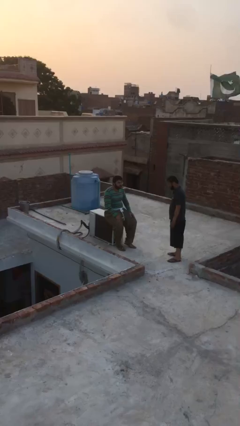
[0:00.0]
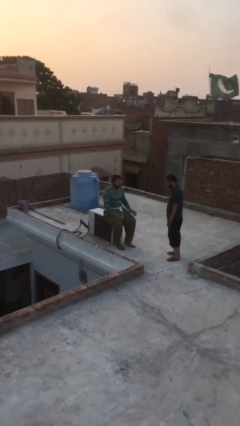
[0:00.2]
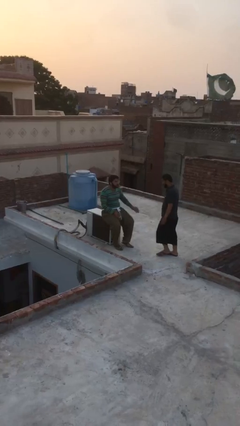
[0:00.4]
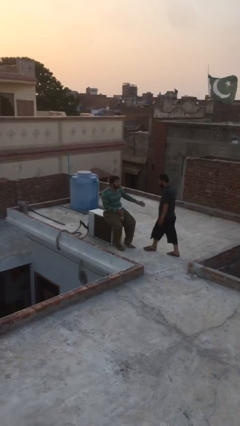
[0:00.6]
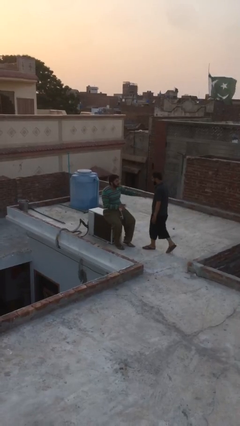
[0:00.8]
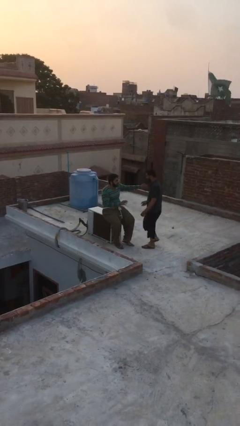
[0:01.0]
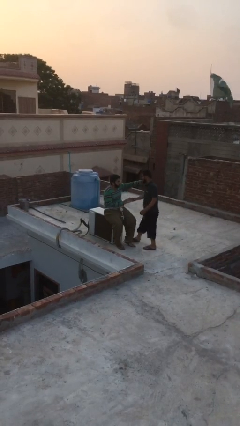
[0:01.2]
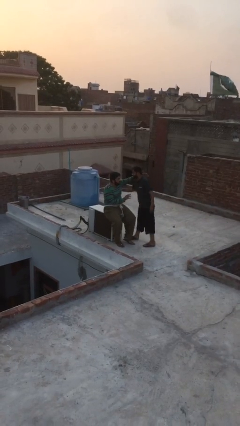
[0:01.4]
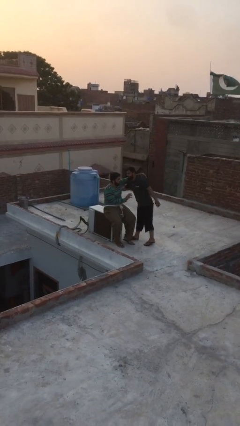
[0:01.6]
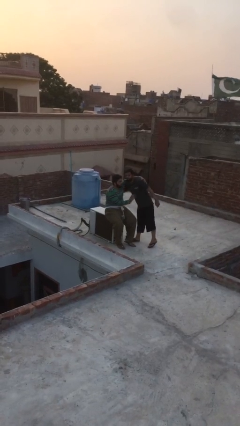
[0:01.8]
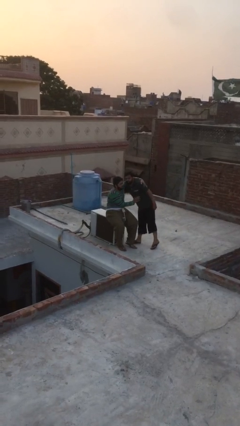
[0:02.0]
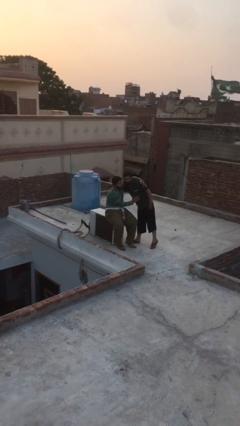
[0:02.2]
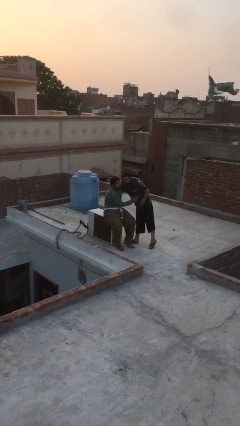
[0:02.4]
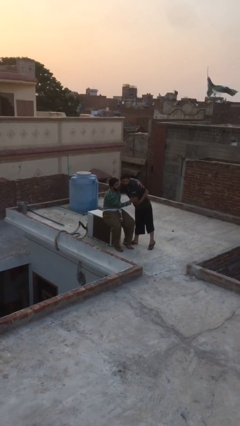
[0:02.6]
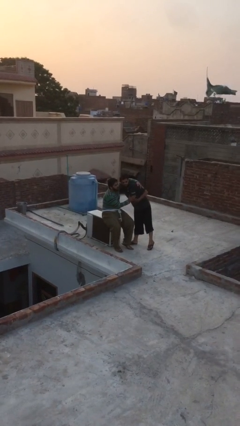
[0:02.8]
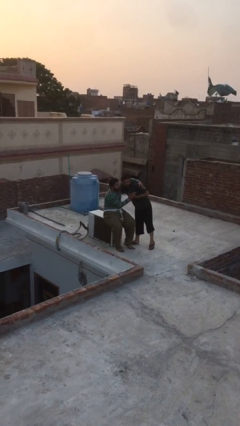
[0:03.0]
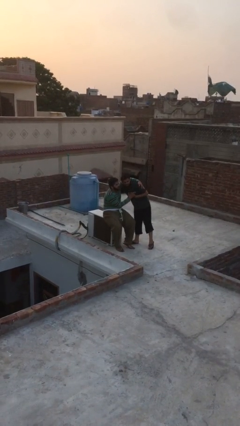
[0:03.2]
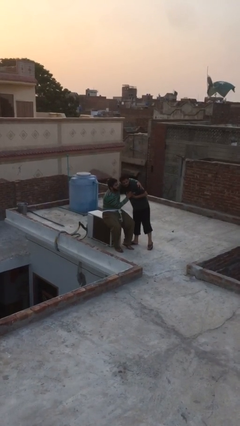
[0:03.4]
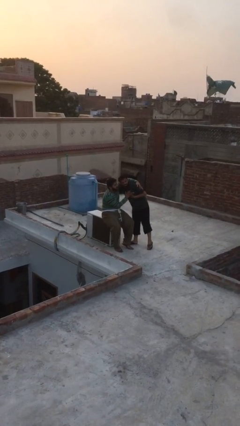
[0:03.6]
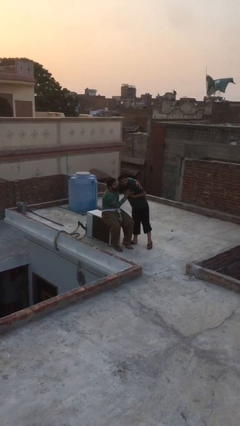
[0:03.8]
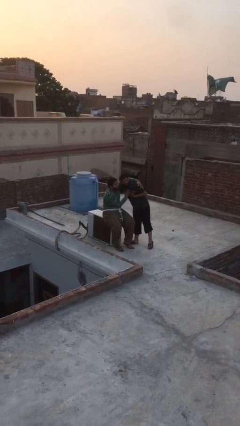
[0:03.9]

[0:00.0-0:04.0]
person embraces person

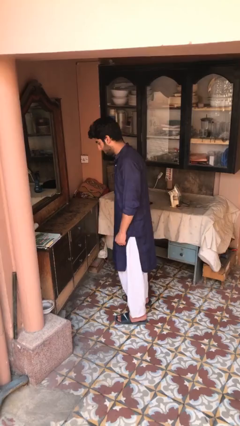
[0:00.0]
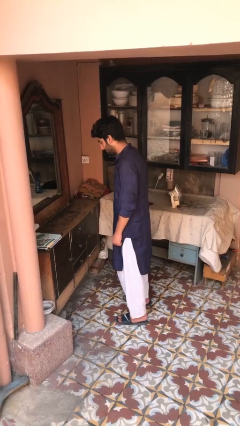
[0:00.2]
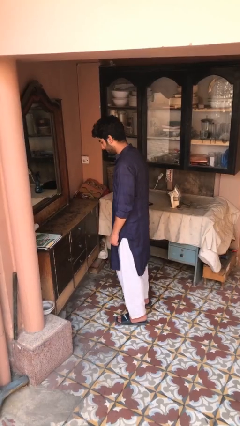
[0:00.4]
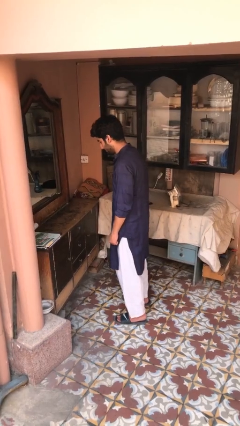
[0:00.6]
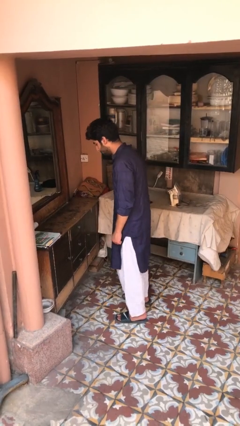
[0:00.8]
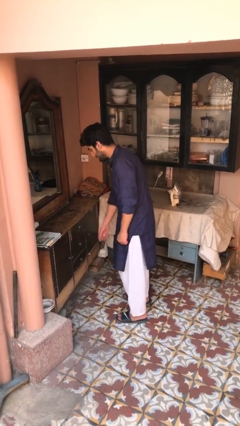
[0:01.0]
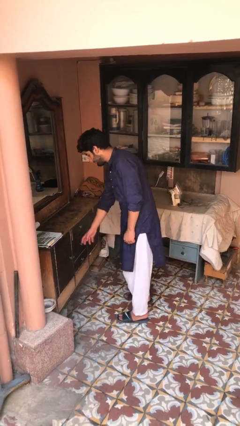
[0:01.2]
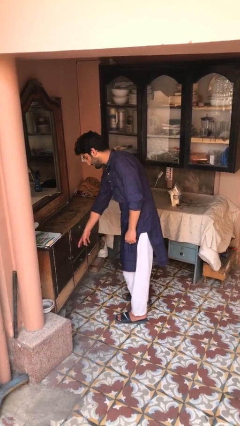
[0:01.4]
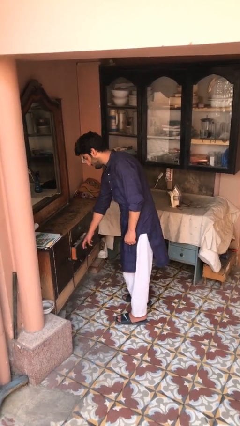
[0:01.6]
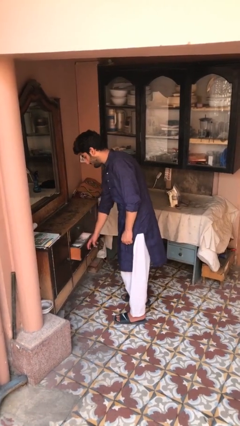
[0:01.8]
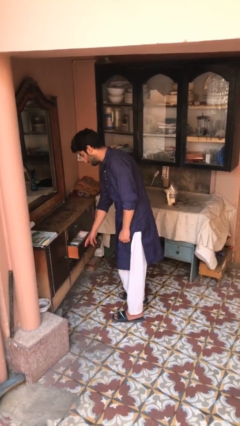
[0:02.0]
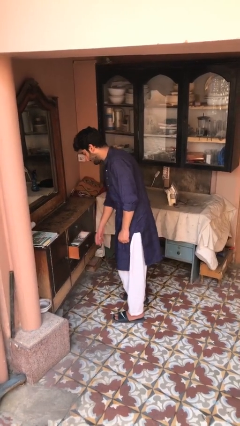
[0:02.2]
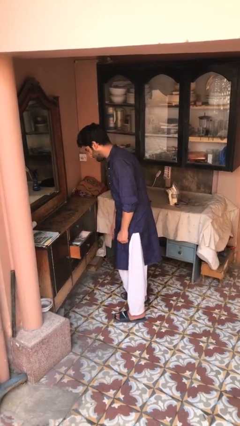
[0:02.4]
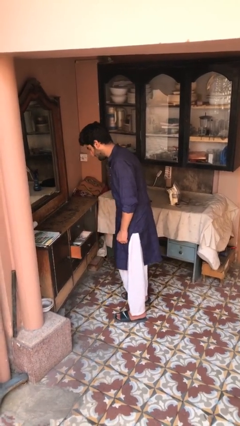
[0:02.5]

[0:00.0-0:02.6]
person opens dresser drawer

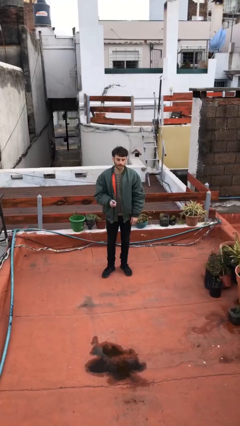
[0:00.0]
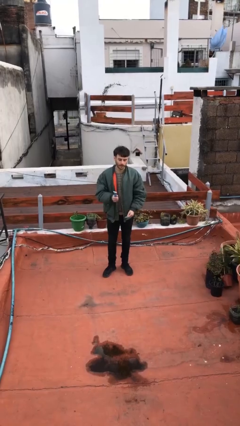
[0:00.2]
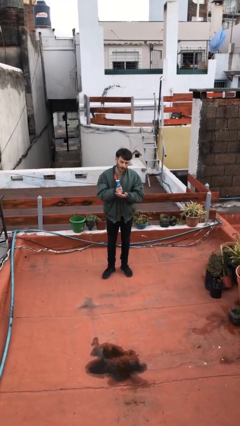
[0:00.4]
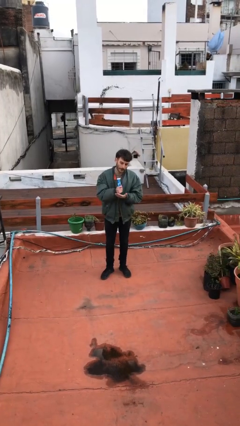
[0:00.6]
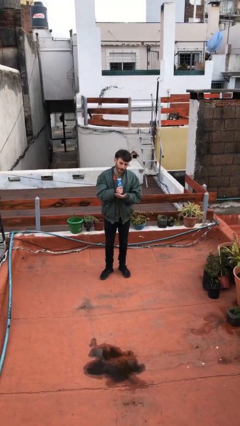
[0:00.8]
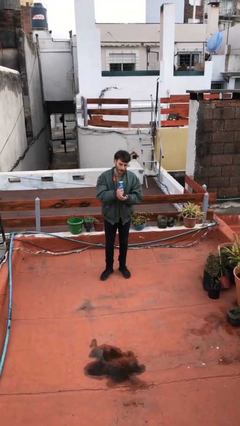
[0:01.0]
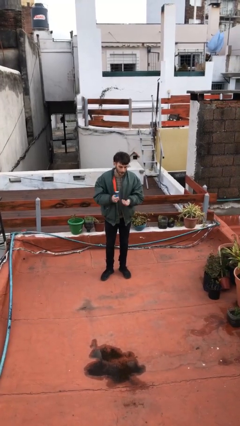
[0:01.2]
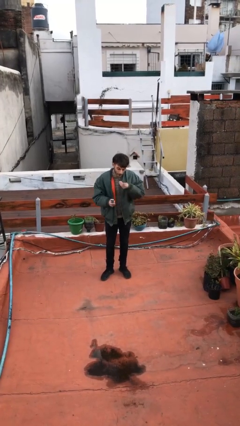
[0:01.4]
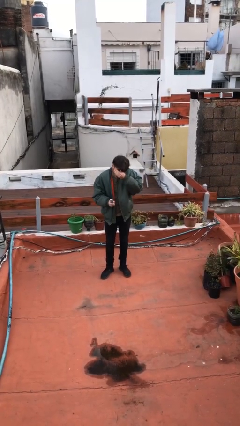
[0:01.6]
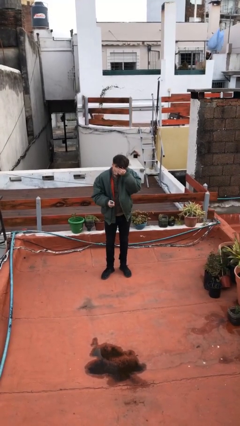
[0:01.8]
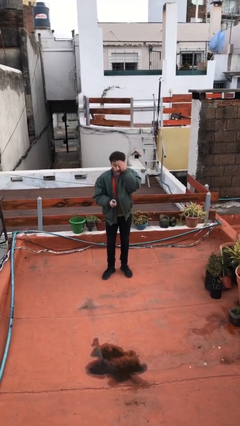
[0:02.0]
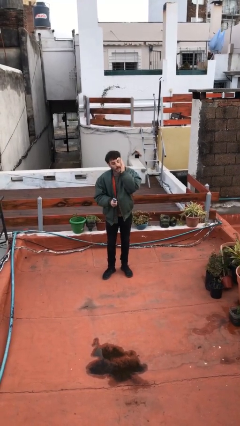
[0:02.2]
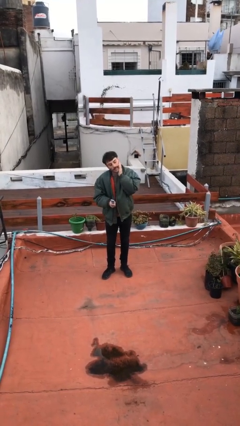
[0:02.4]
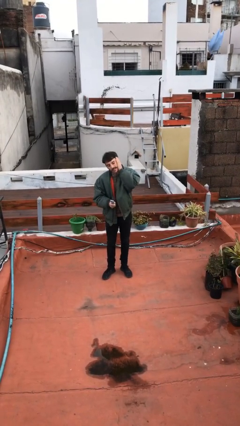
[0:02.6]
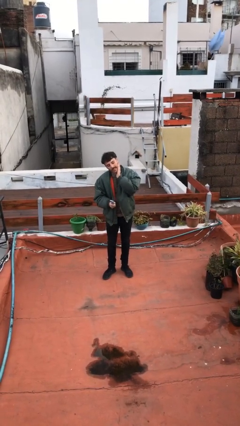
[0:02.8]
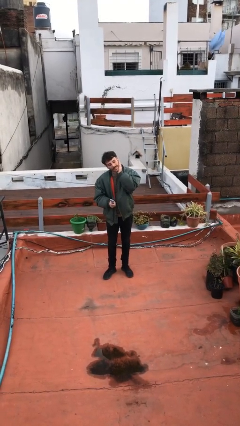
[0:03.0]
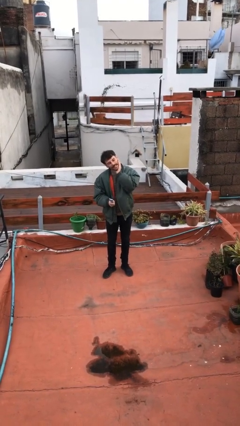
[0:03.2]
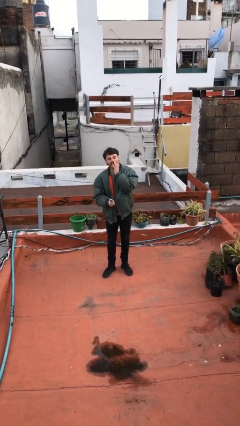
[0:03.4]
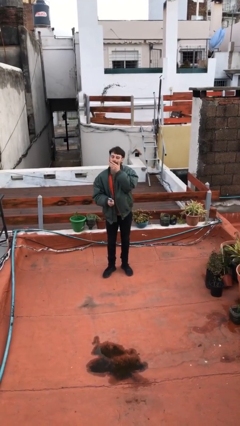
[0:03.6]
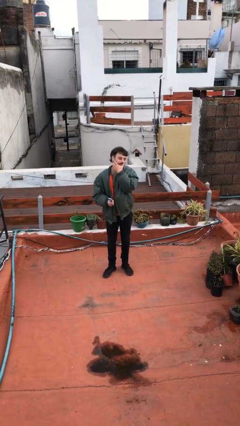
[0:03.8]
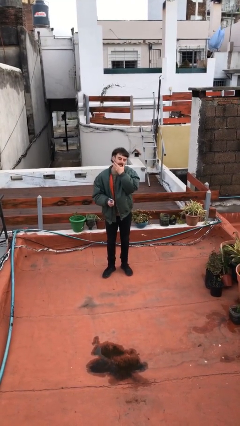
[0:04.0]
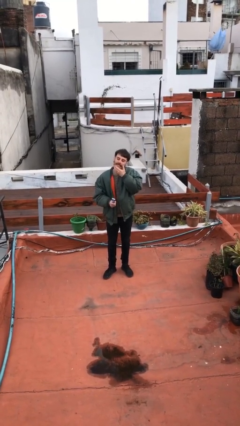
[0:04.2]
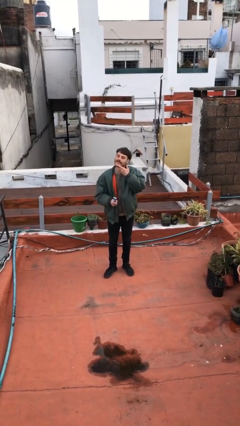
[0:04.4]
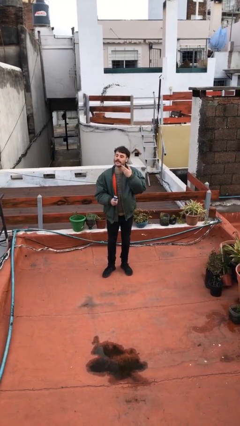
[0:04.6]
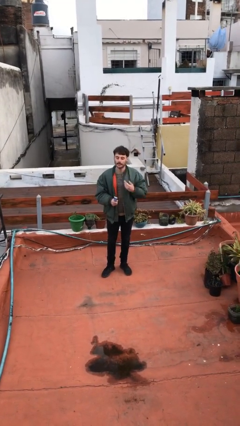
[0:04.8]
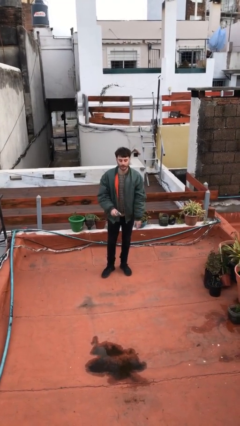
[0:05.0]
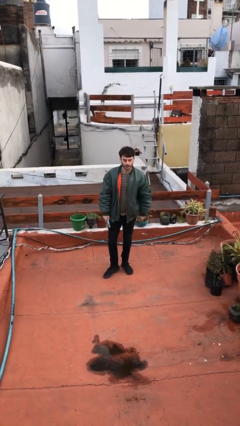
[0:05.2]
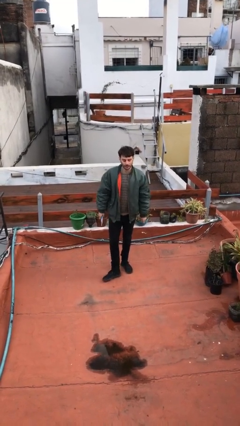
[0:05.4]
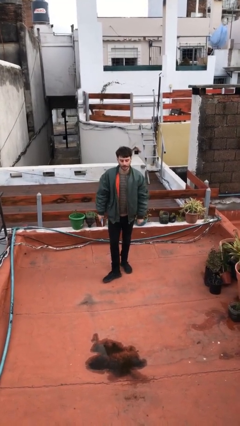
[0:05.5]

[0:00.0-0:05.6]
person applies facial moisturizer

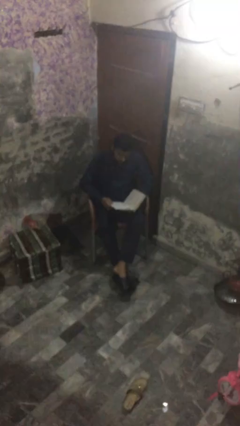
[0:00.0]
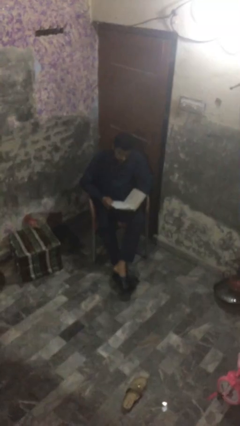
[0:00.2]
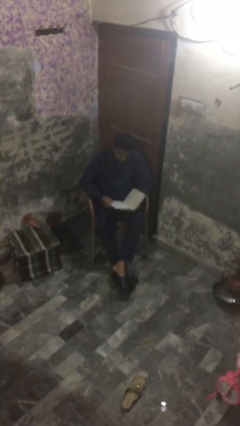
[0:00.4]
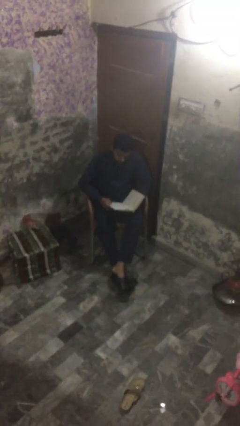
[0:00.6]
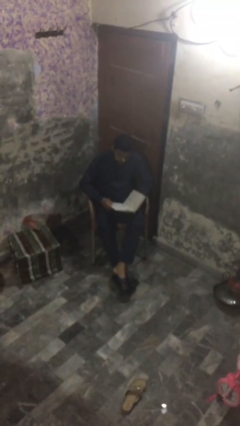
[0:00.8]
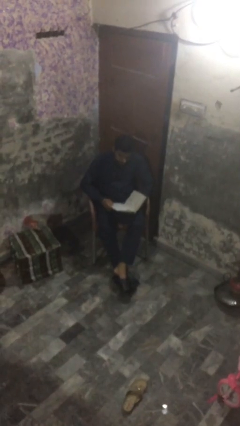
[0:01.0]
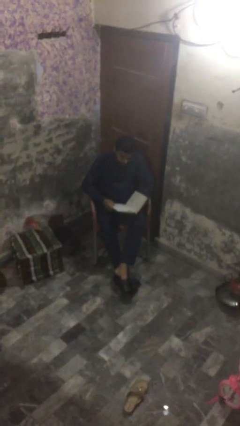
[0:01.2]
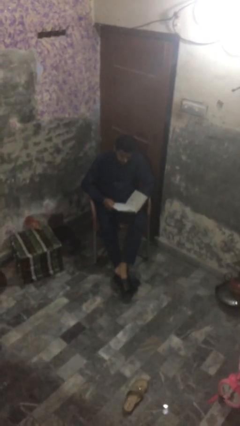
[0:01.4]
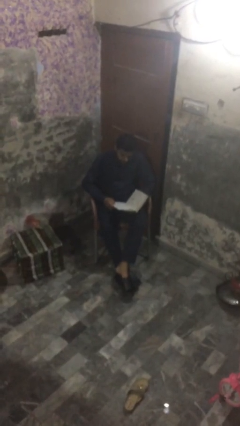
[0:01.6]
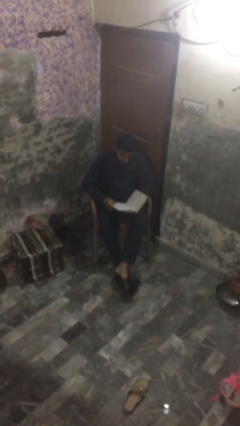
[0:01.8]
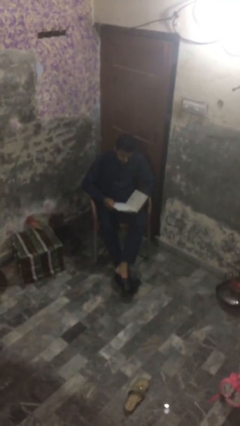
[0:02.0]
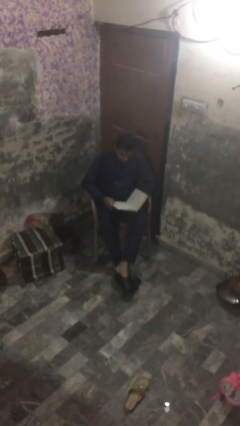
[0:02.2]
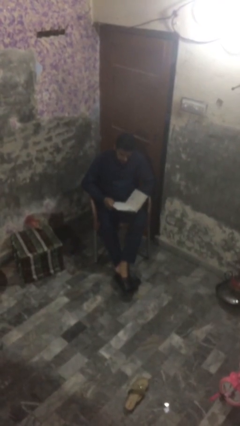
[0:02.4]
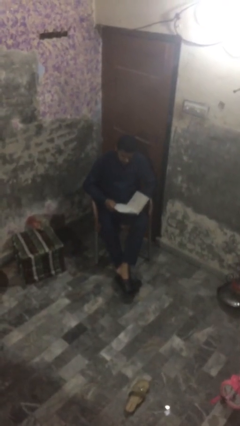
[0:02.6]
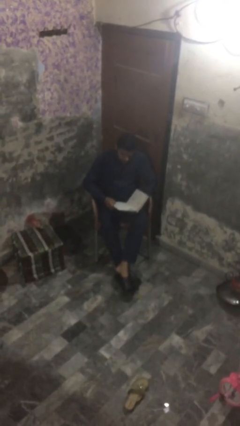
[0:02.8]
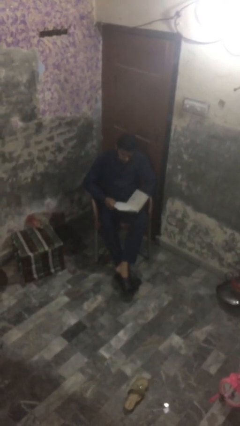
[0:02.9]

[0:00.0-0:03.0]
person sits down

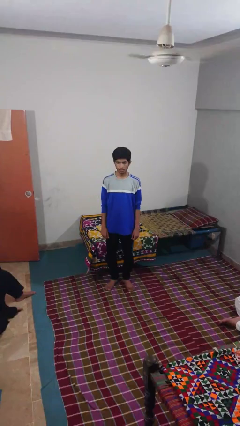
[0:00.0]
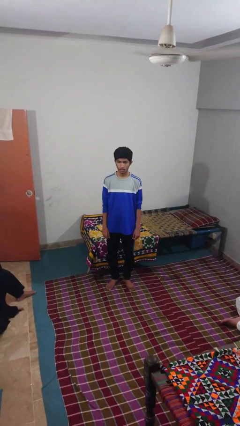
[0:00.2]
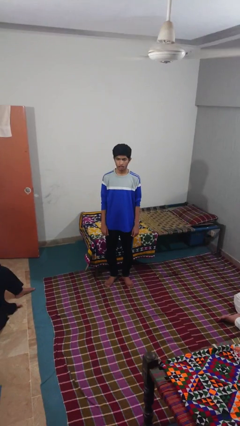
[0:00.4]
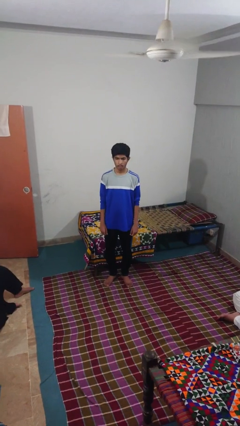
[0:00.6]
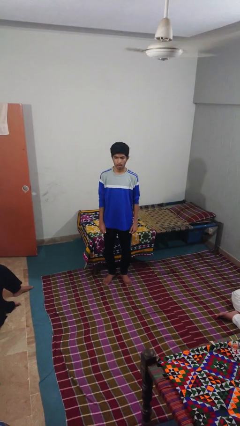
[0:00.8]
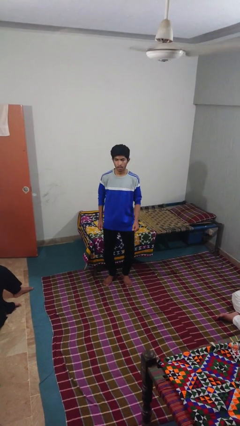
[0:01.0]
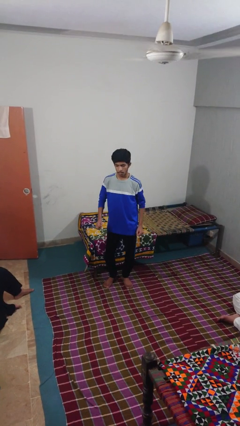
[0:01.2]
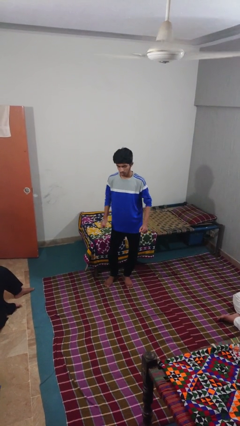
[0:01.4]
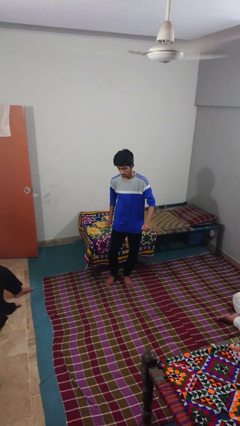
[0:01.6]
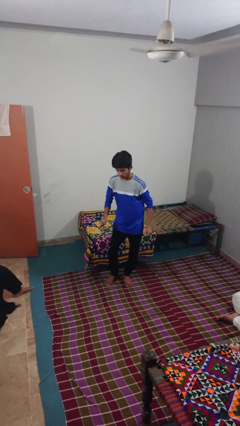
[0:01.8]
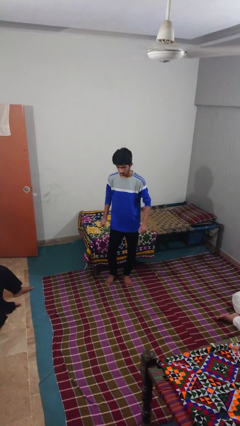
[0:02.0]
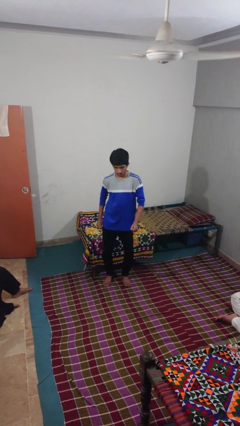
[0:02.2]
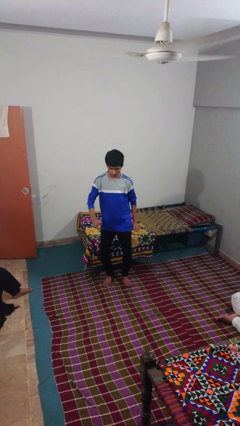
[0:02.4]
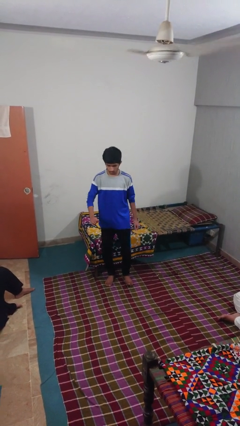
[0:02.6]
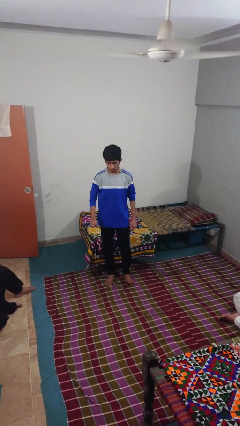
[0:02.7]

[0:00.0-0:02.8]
person dances in place
